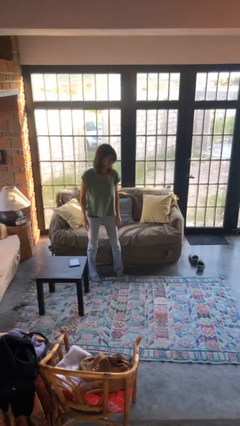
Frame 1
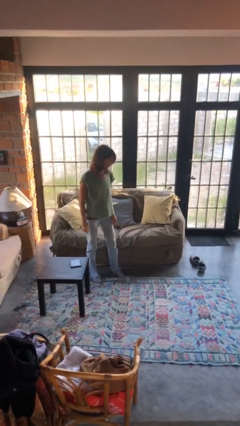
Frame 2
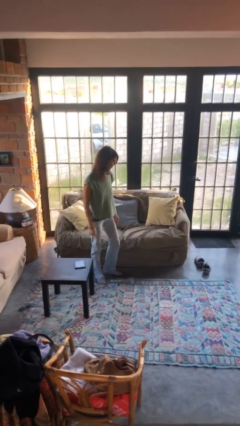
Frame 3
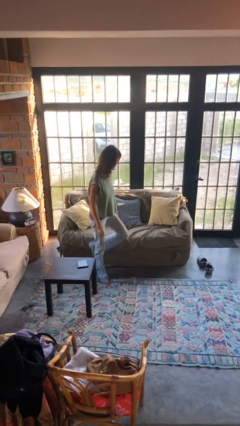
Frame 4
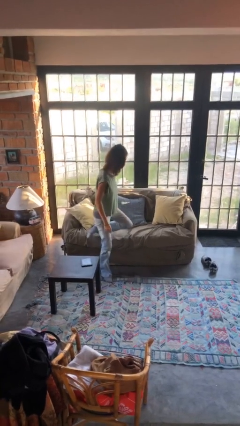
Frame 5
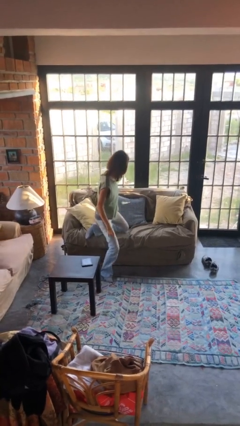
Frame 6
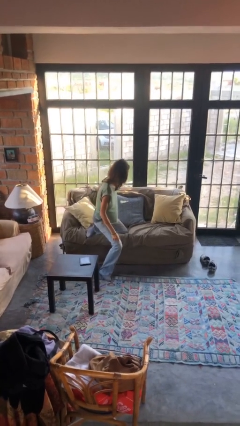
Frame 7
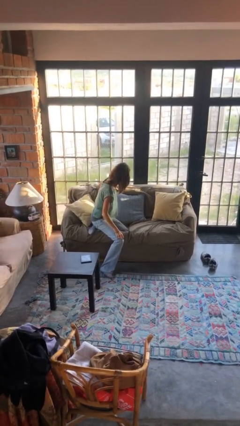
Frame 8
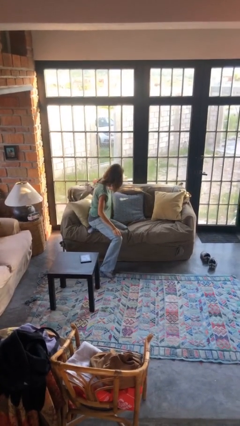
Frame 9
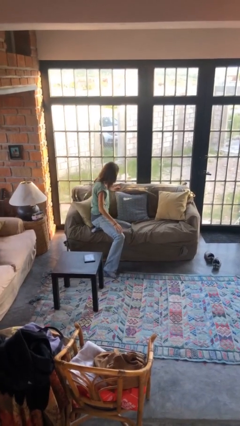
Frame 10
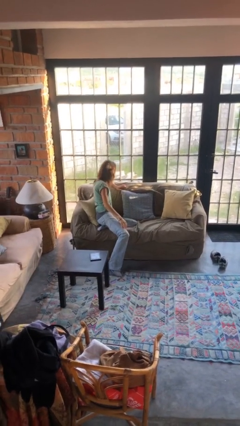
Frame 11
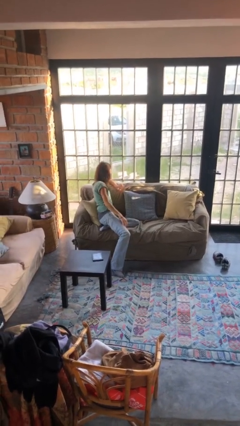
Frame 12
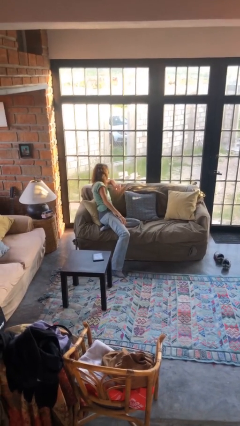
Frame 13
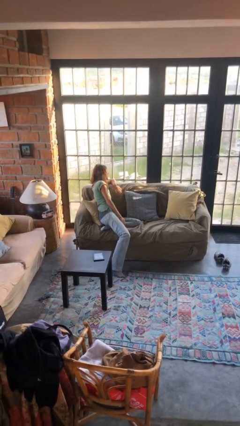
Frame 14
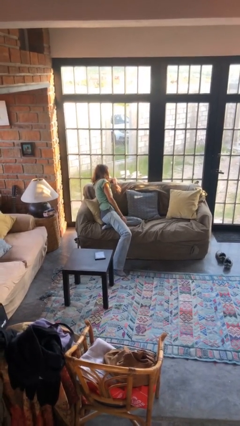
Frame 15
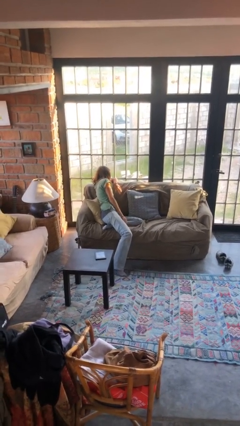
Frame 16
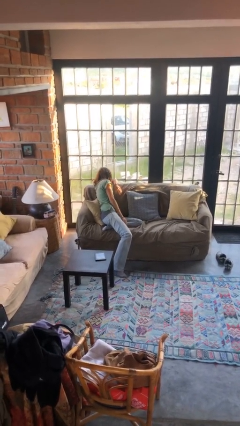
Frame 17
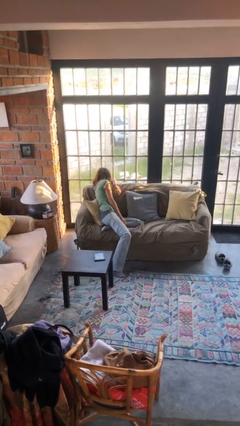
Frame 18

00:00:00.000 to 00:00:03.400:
person lies down on couch

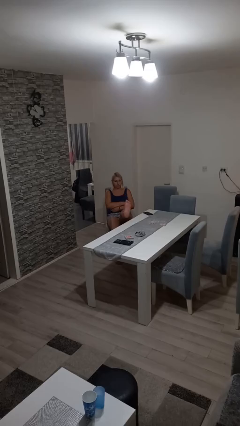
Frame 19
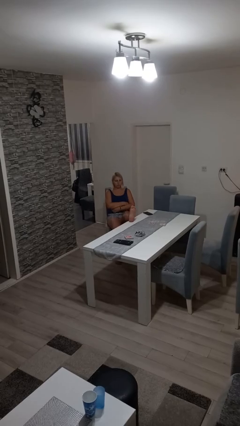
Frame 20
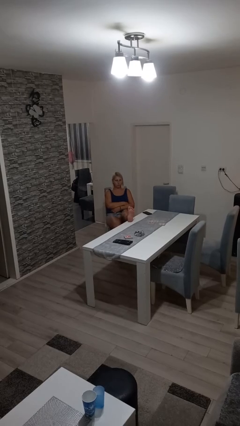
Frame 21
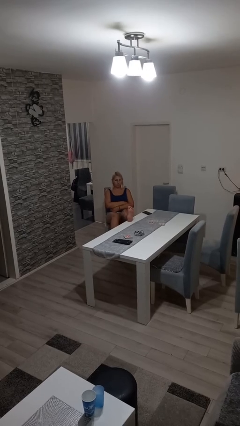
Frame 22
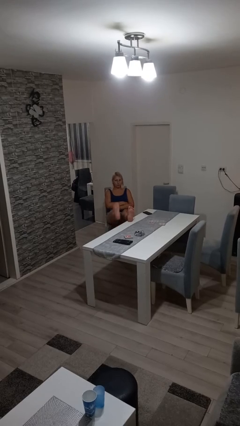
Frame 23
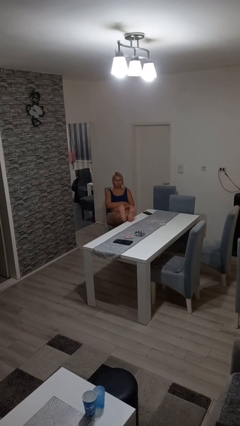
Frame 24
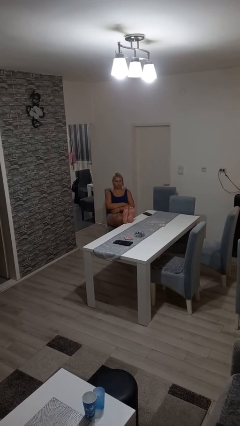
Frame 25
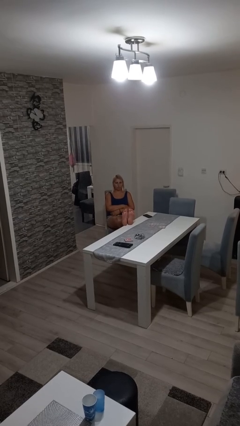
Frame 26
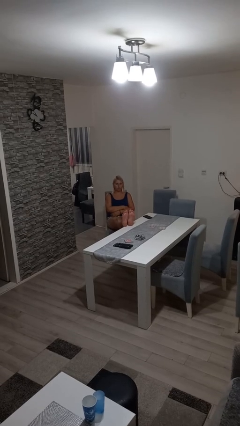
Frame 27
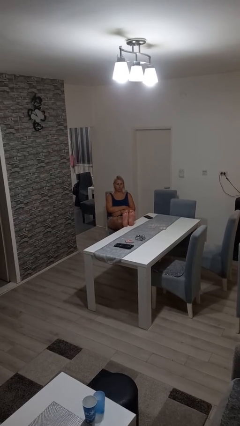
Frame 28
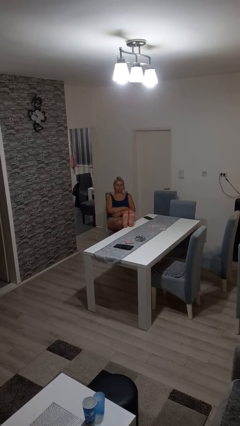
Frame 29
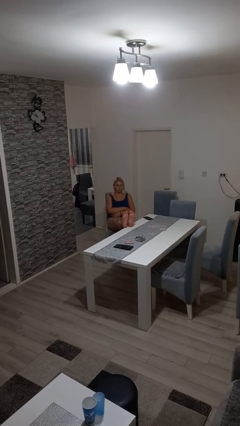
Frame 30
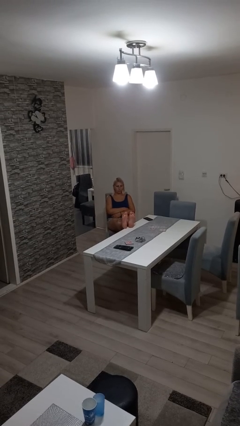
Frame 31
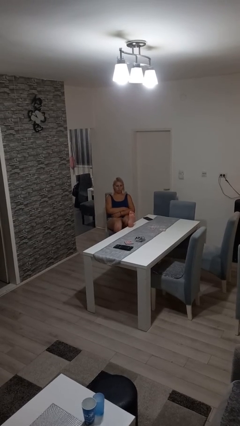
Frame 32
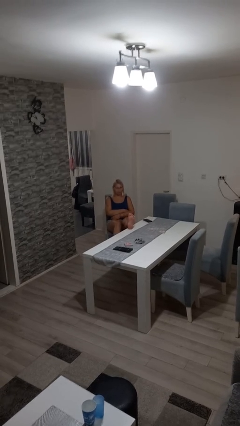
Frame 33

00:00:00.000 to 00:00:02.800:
person puts feet up

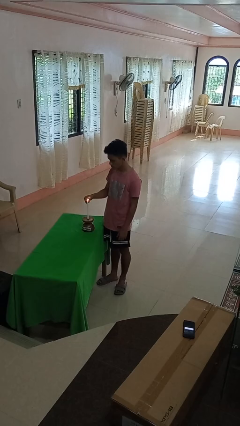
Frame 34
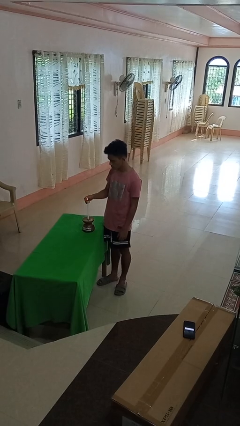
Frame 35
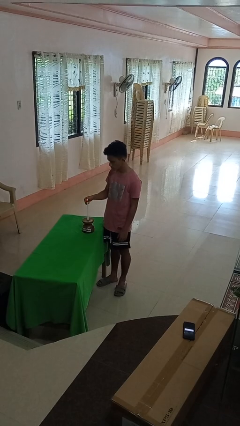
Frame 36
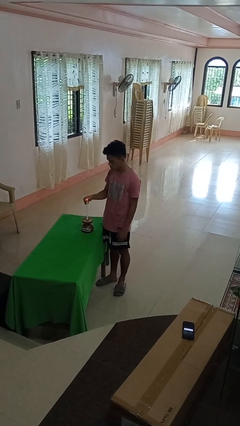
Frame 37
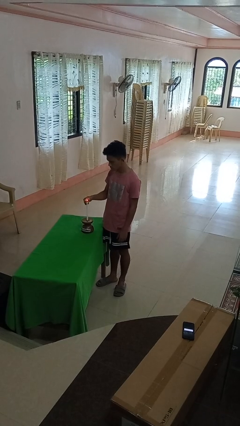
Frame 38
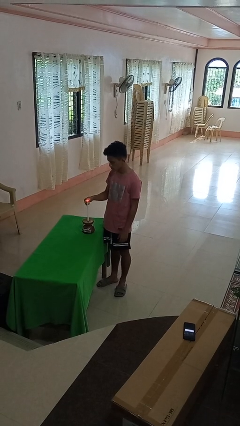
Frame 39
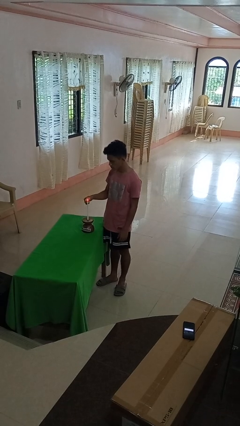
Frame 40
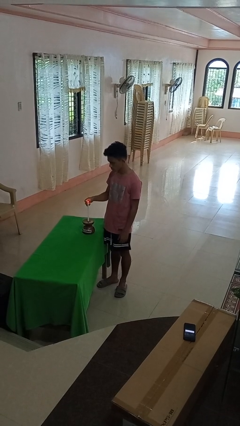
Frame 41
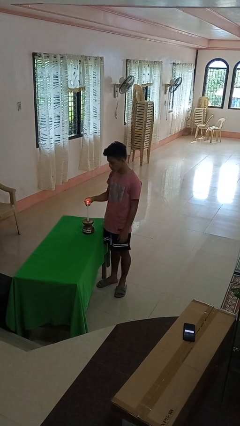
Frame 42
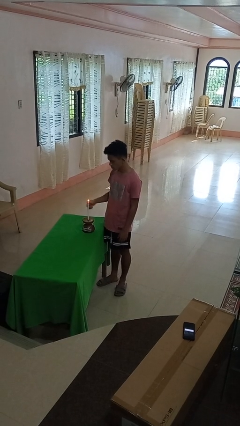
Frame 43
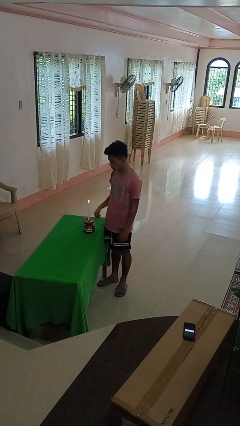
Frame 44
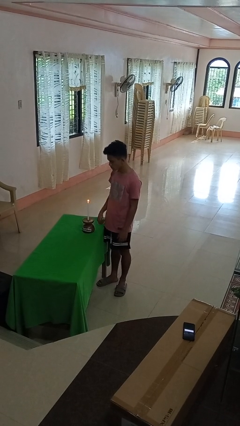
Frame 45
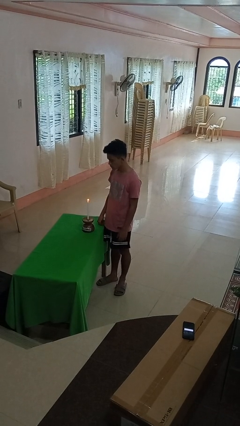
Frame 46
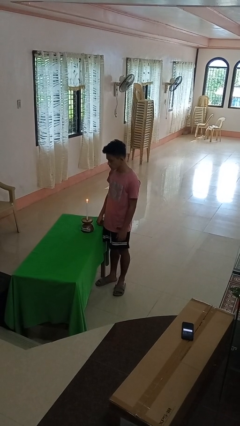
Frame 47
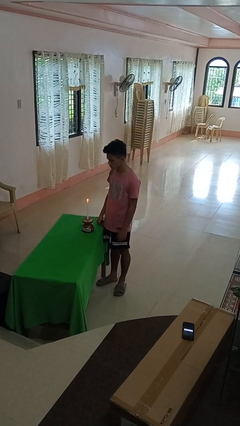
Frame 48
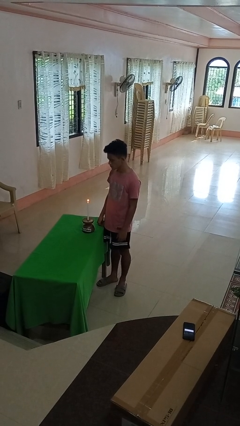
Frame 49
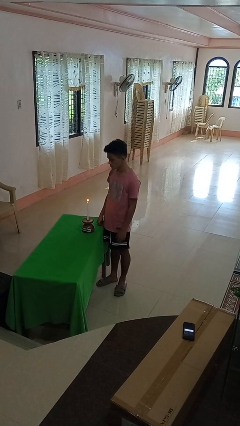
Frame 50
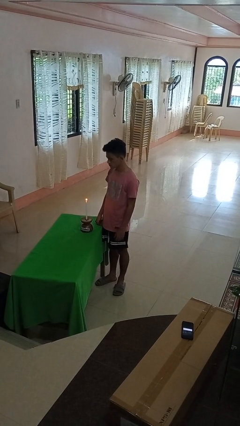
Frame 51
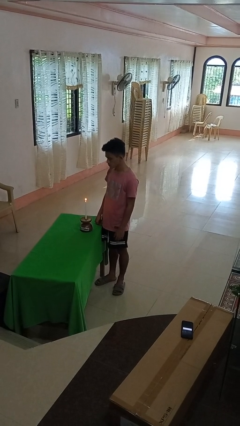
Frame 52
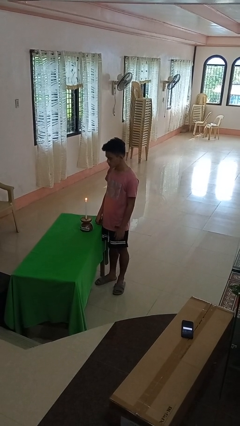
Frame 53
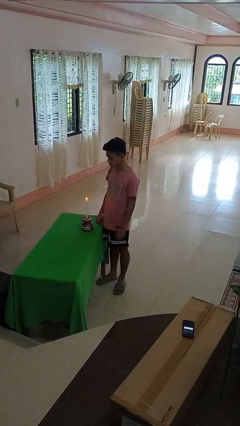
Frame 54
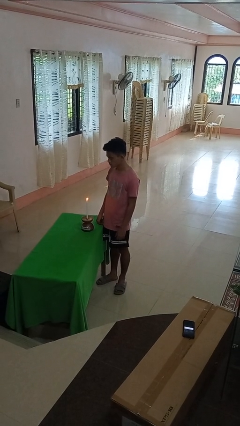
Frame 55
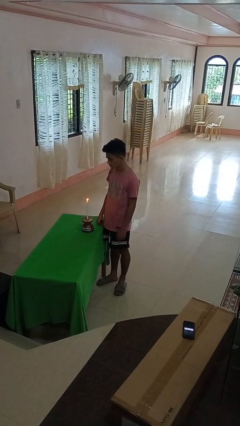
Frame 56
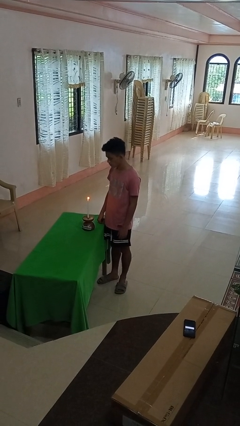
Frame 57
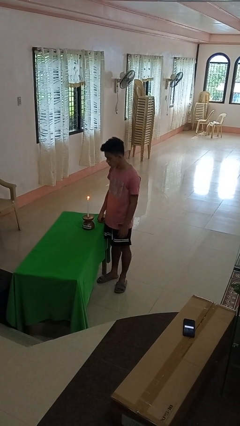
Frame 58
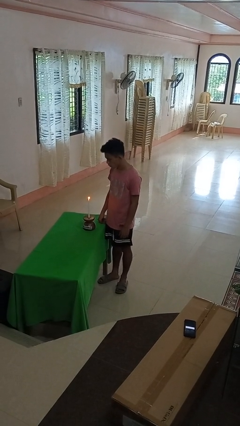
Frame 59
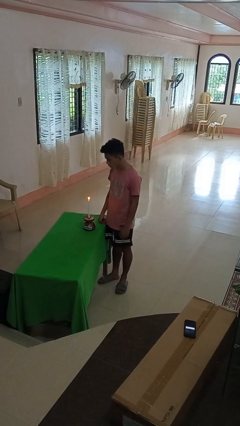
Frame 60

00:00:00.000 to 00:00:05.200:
person lights candle

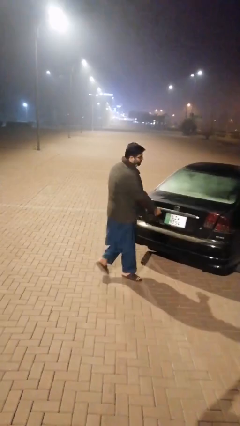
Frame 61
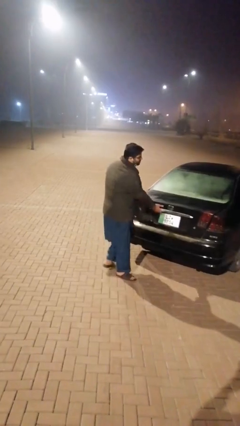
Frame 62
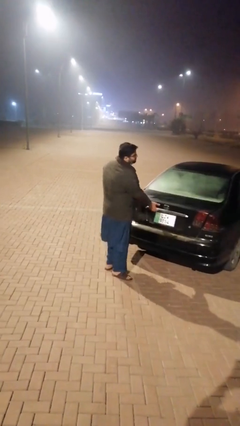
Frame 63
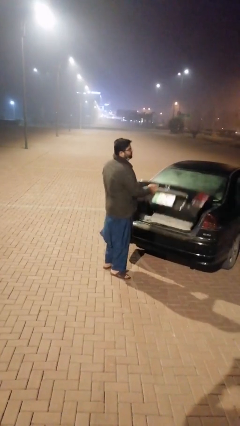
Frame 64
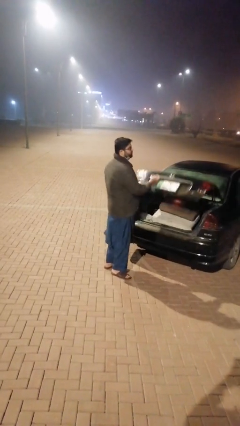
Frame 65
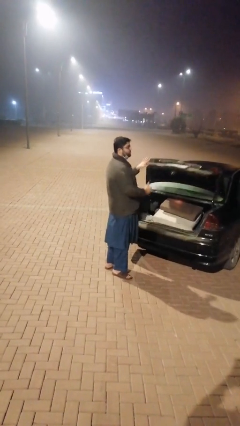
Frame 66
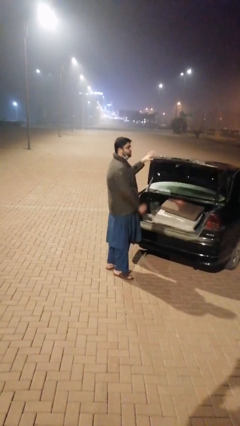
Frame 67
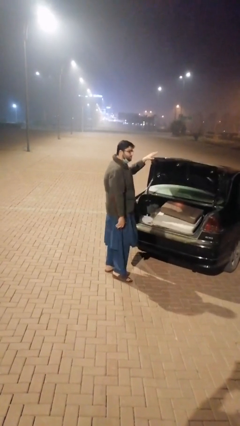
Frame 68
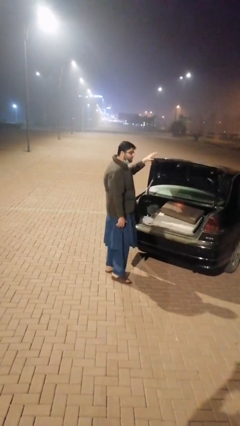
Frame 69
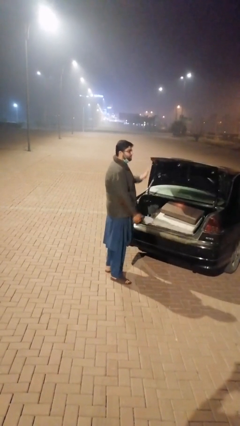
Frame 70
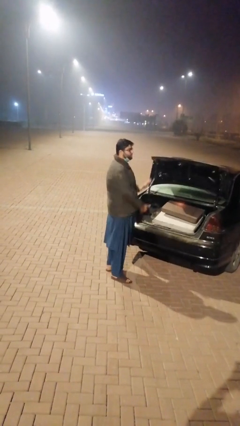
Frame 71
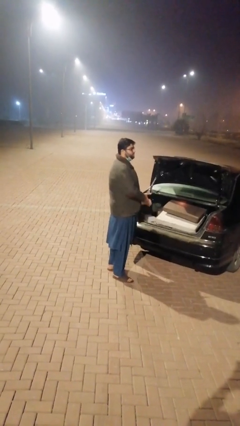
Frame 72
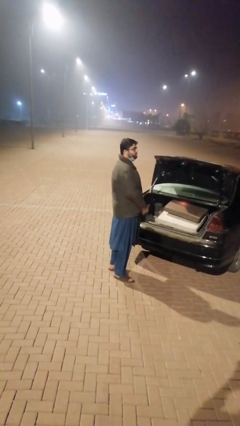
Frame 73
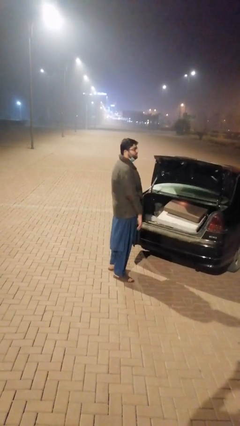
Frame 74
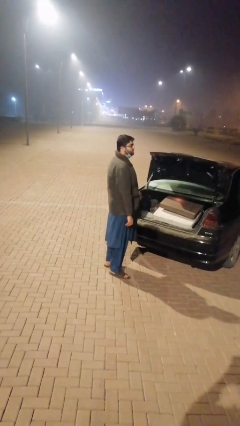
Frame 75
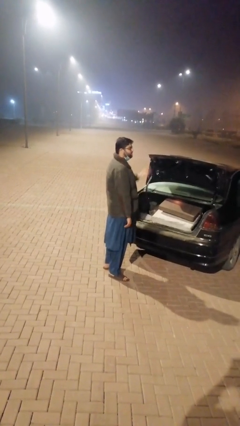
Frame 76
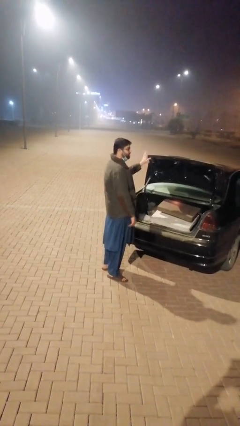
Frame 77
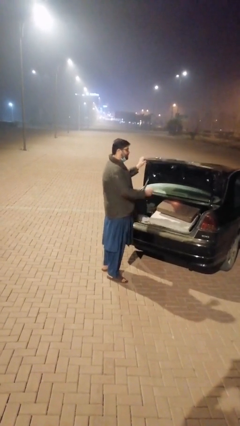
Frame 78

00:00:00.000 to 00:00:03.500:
person opens car trunk

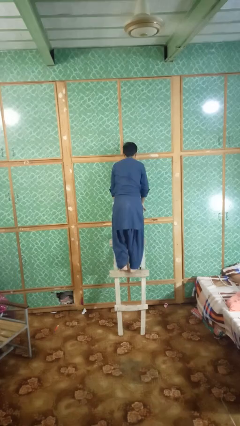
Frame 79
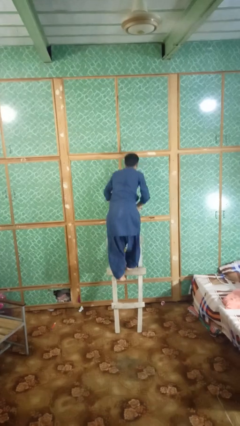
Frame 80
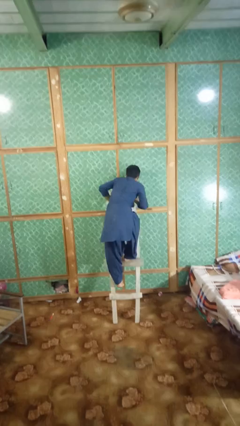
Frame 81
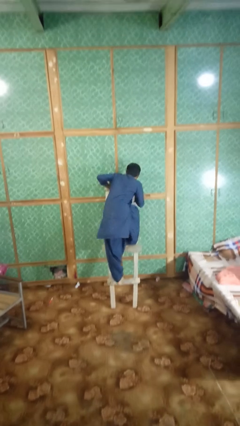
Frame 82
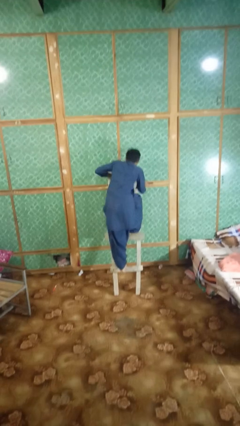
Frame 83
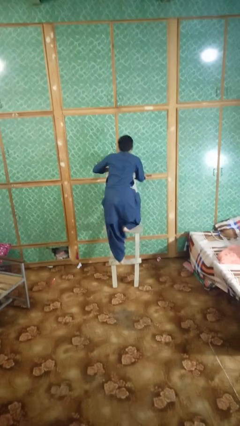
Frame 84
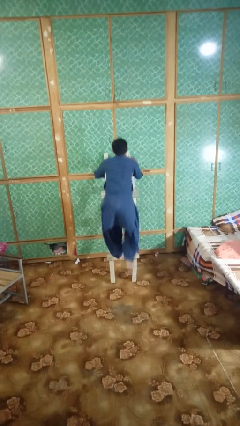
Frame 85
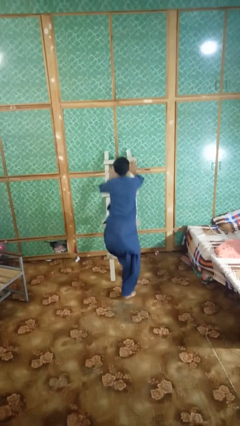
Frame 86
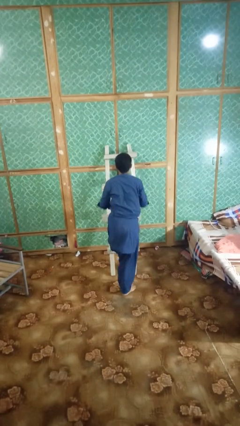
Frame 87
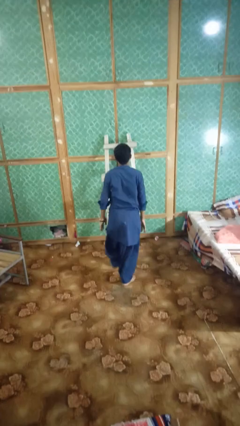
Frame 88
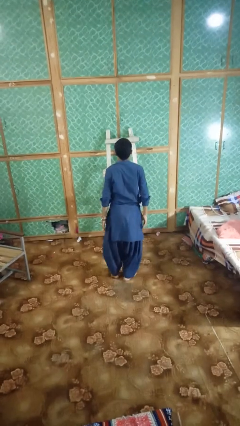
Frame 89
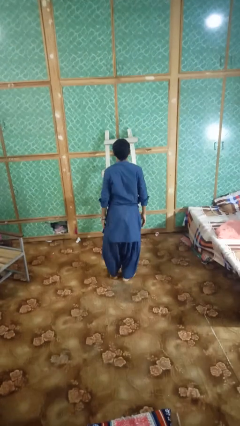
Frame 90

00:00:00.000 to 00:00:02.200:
person climbs down ladder

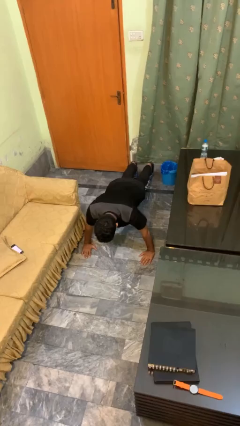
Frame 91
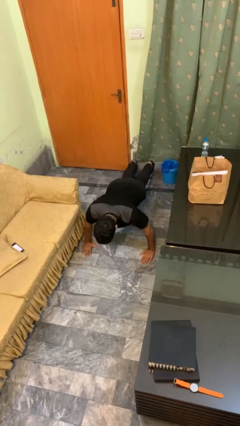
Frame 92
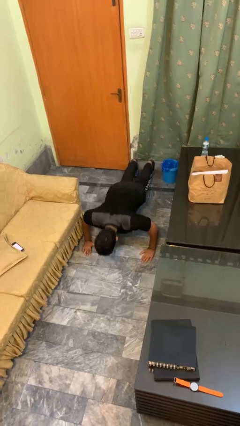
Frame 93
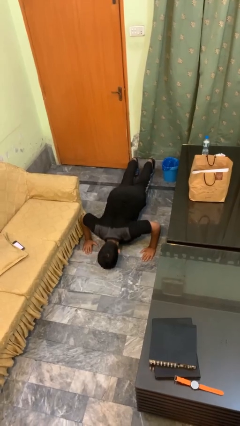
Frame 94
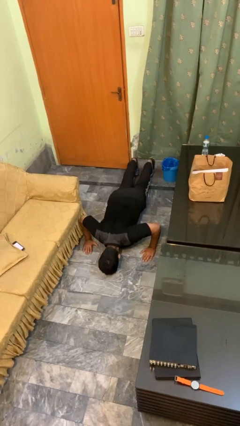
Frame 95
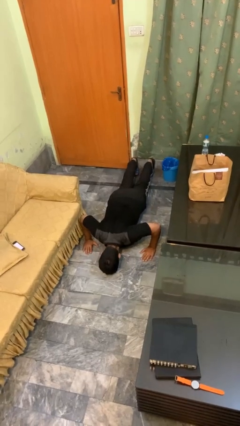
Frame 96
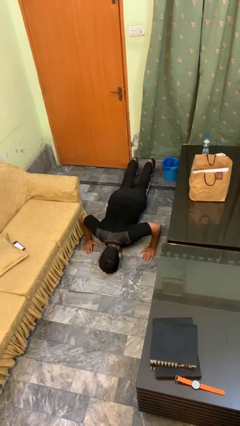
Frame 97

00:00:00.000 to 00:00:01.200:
person exercises with pushup
